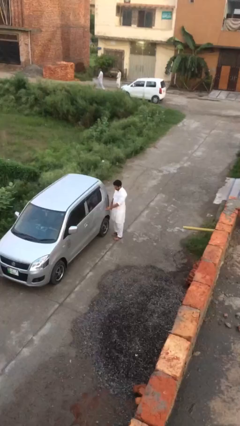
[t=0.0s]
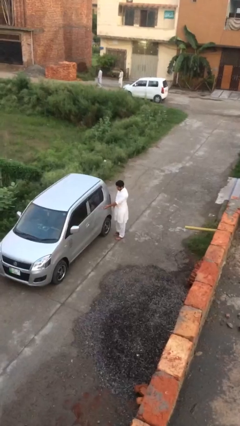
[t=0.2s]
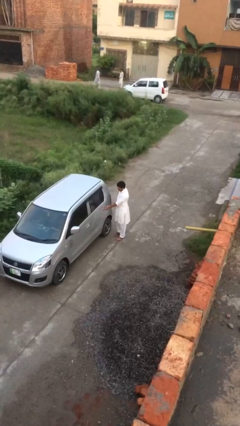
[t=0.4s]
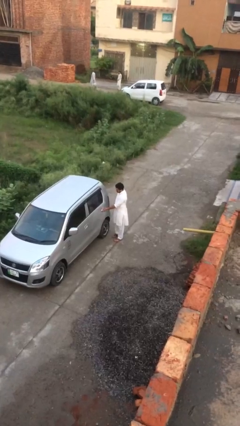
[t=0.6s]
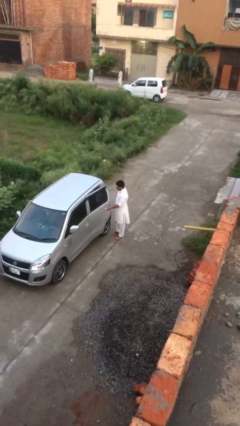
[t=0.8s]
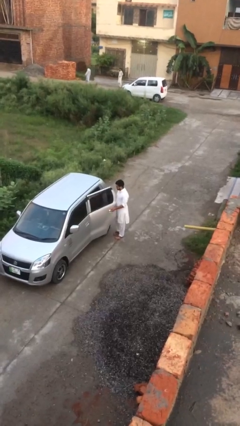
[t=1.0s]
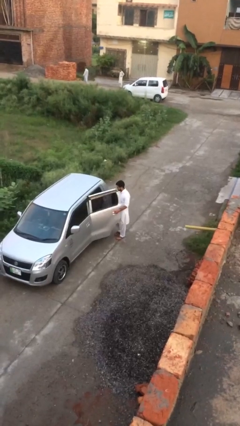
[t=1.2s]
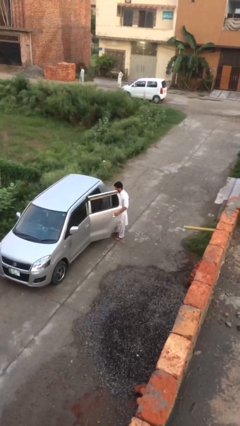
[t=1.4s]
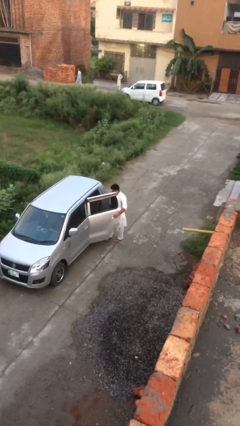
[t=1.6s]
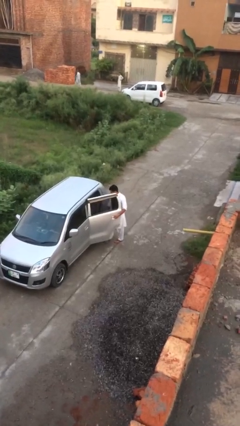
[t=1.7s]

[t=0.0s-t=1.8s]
person opens car door

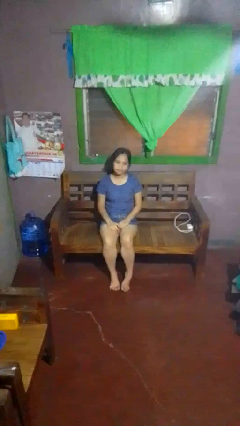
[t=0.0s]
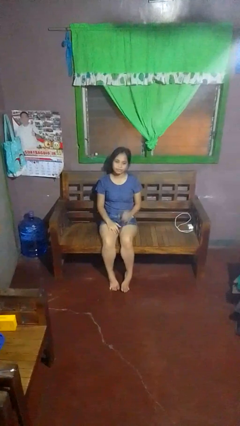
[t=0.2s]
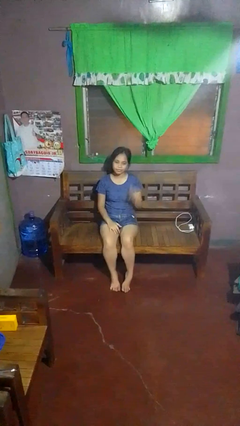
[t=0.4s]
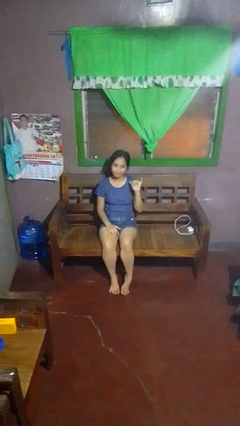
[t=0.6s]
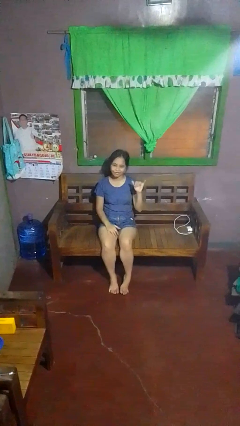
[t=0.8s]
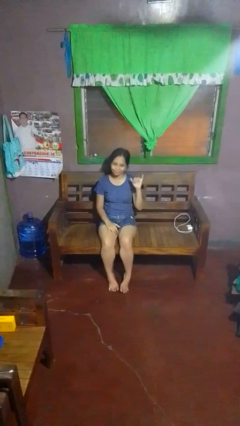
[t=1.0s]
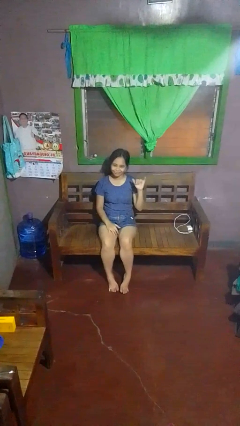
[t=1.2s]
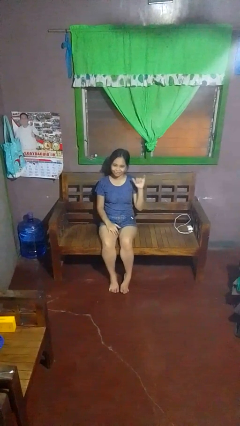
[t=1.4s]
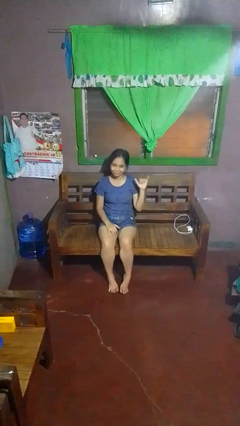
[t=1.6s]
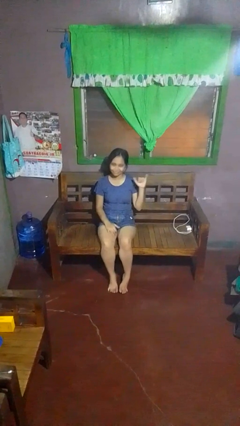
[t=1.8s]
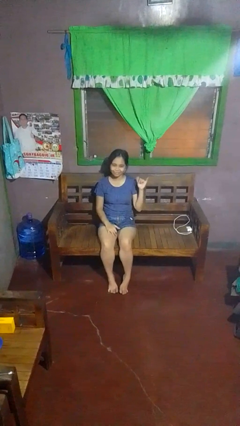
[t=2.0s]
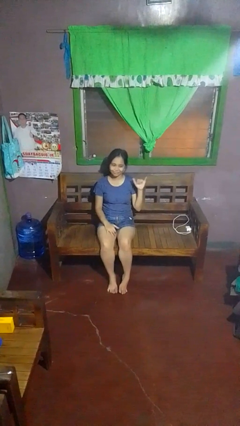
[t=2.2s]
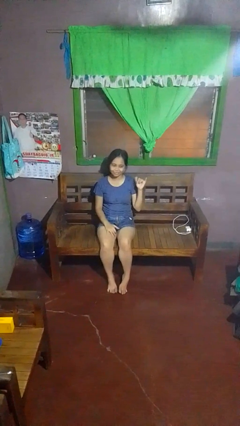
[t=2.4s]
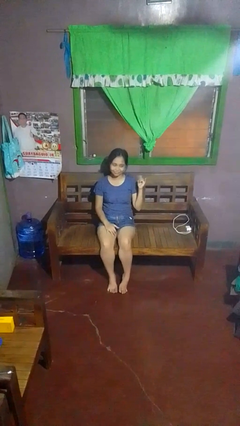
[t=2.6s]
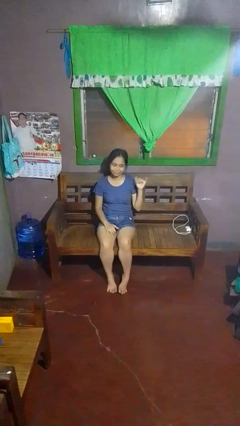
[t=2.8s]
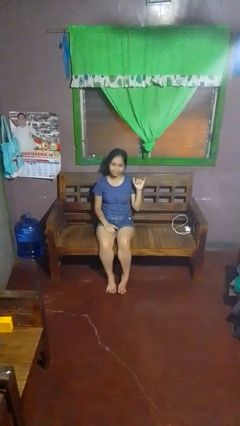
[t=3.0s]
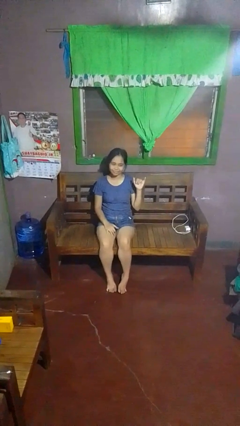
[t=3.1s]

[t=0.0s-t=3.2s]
person gestures hang loose

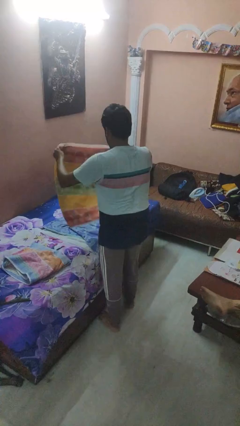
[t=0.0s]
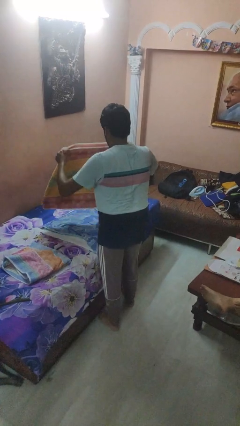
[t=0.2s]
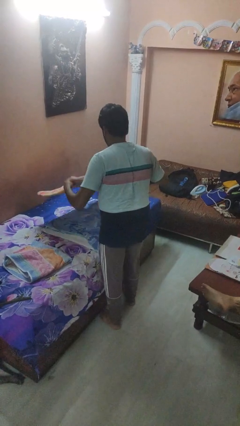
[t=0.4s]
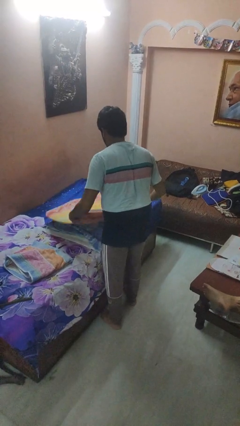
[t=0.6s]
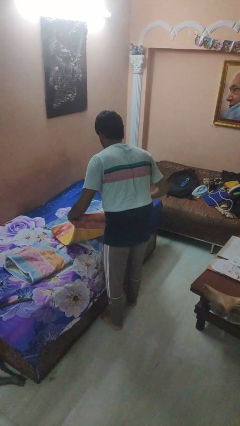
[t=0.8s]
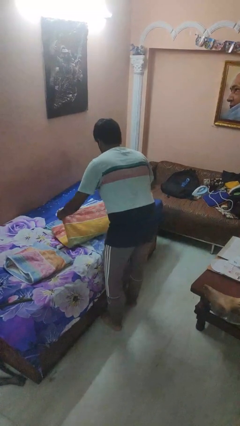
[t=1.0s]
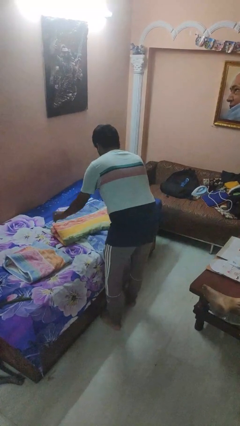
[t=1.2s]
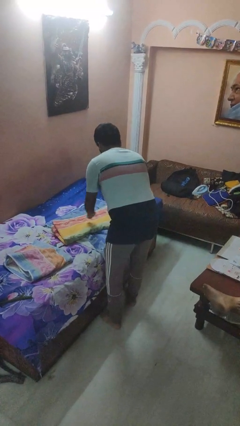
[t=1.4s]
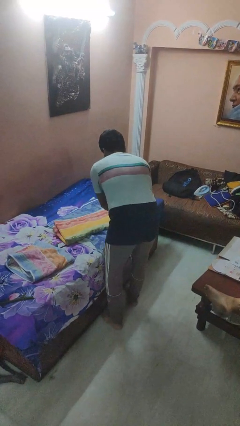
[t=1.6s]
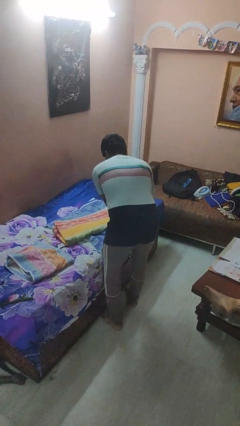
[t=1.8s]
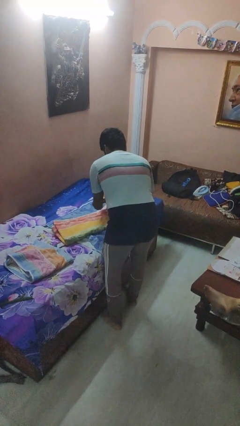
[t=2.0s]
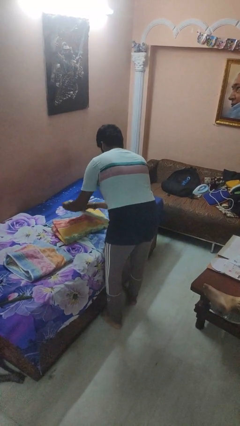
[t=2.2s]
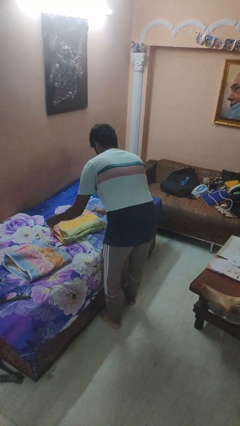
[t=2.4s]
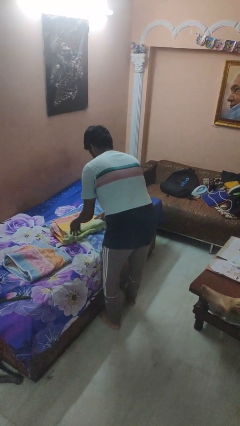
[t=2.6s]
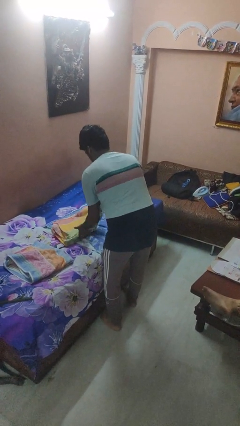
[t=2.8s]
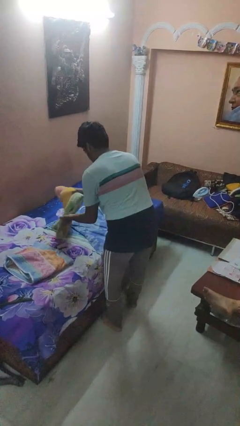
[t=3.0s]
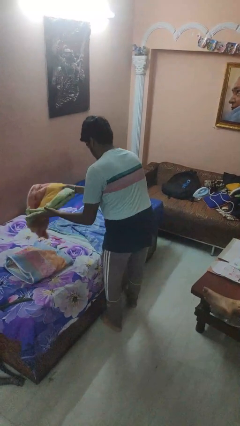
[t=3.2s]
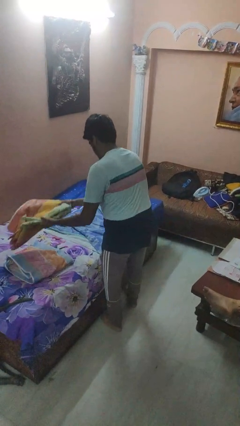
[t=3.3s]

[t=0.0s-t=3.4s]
person folds towel

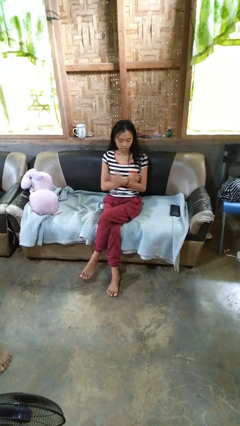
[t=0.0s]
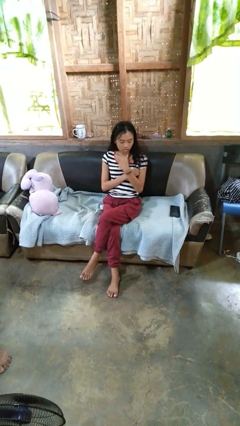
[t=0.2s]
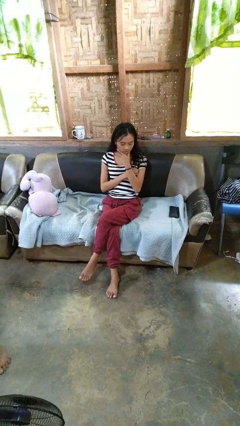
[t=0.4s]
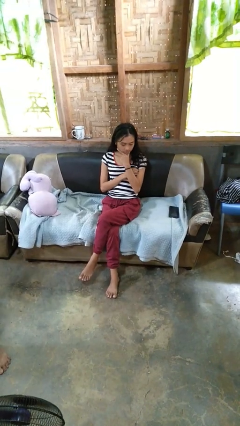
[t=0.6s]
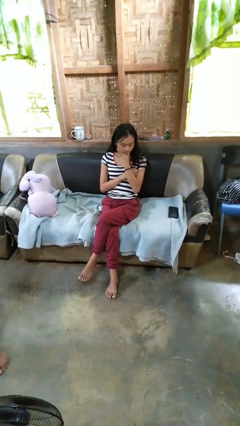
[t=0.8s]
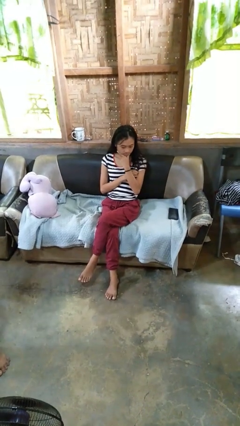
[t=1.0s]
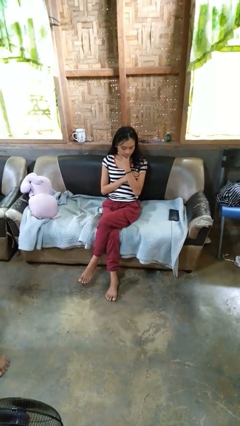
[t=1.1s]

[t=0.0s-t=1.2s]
person strokes chin

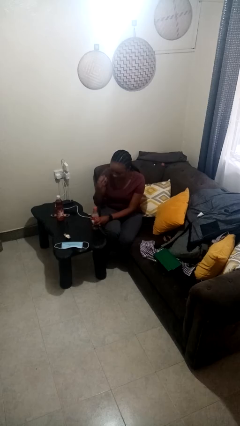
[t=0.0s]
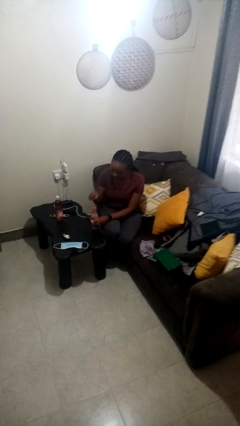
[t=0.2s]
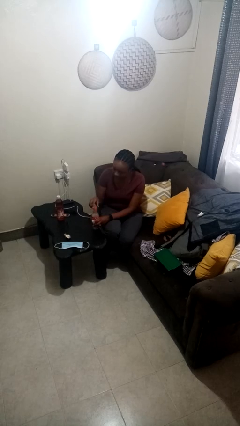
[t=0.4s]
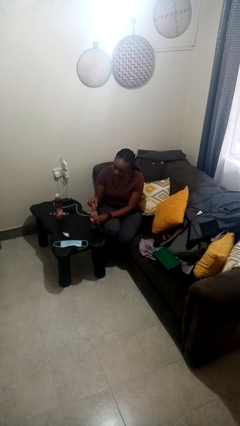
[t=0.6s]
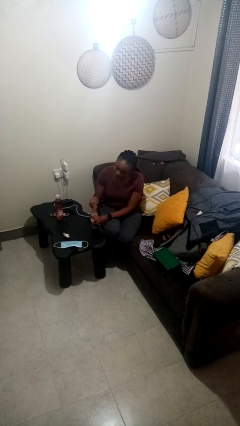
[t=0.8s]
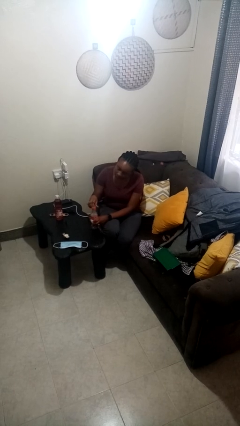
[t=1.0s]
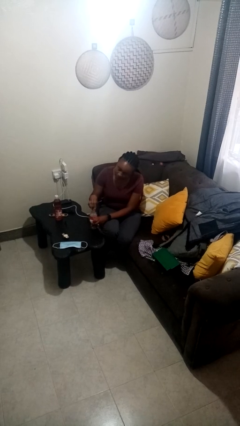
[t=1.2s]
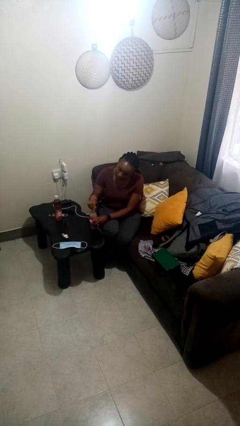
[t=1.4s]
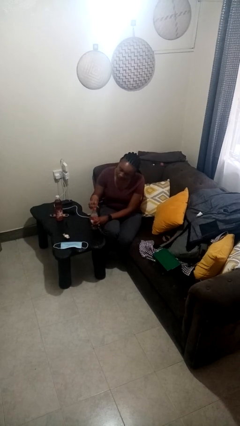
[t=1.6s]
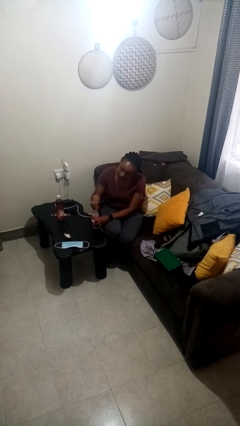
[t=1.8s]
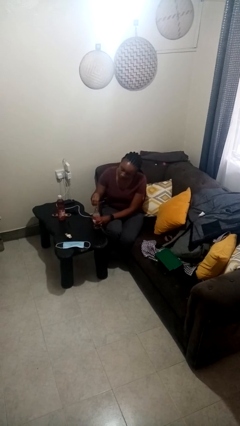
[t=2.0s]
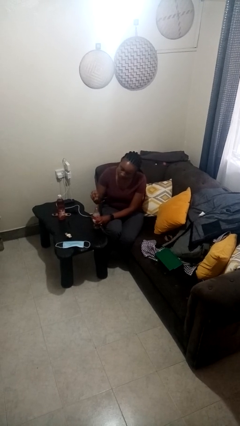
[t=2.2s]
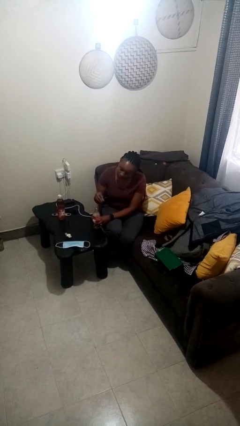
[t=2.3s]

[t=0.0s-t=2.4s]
person unscrews lid from bottle

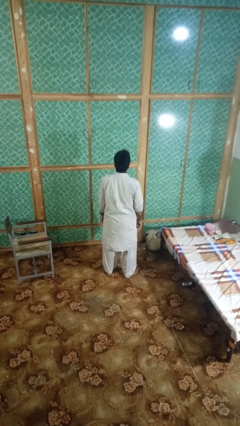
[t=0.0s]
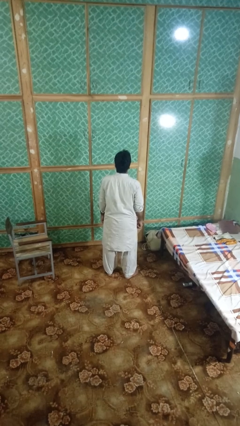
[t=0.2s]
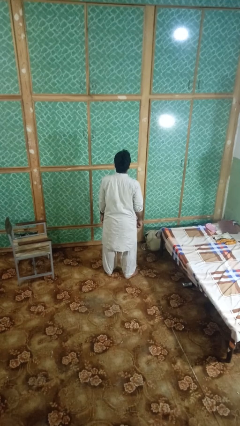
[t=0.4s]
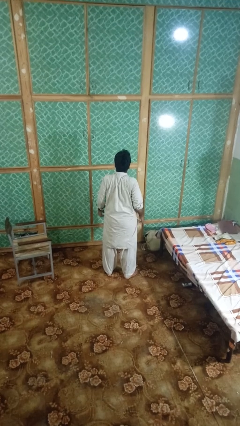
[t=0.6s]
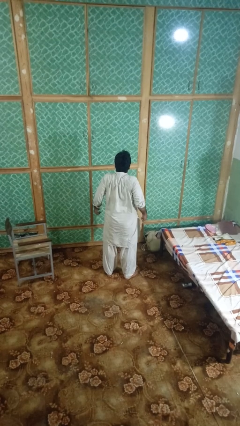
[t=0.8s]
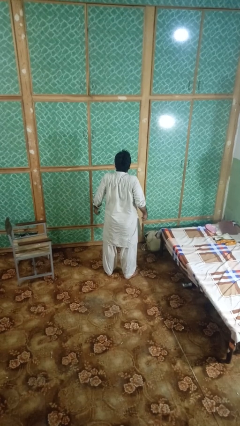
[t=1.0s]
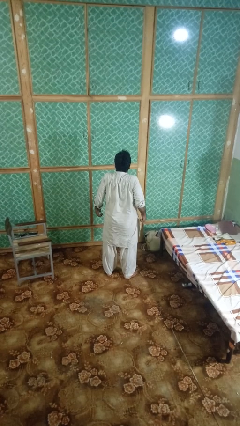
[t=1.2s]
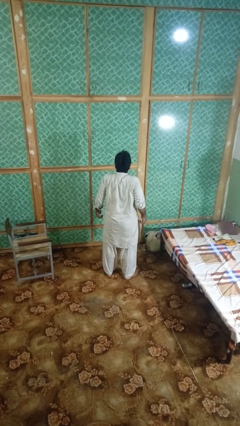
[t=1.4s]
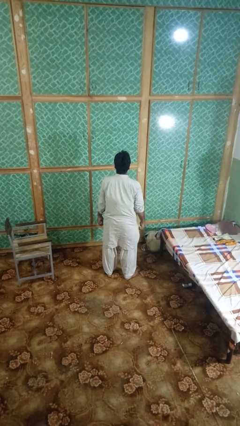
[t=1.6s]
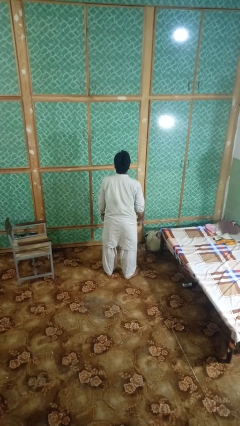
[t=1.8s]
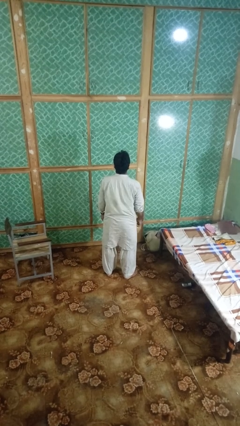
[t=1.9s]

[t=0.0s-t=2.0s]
person shrugs

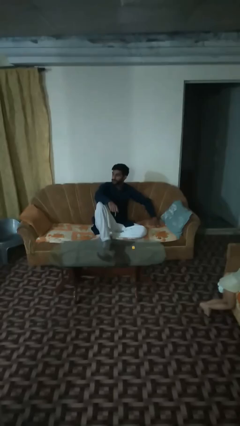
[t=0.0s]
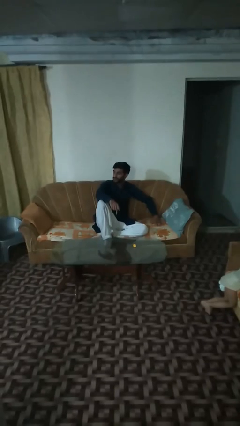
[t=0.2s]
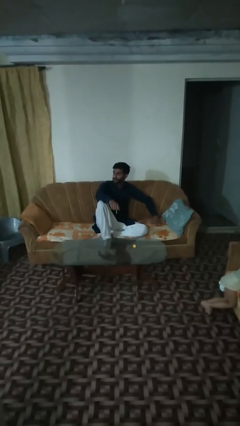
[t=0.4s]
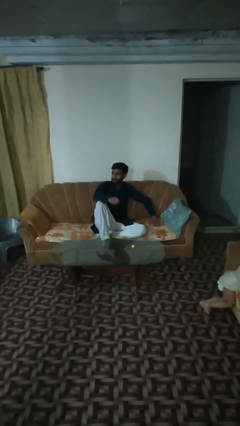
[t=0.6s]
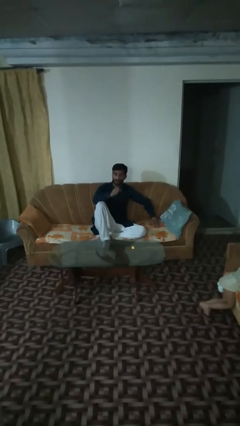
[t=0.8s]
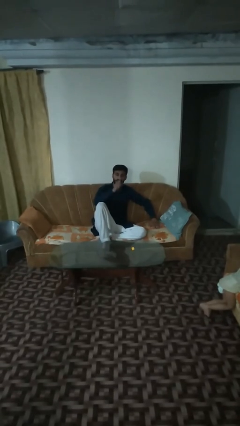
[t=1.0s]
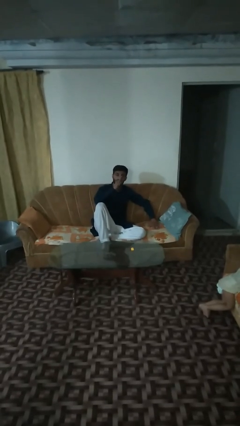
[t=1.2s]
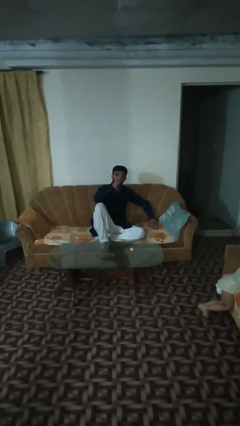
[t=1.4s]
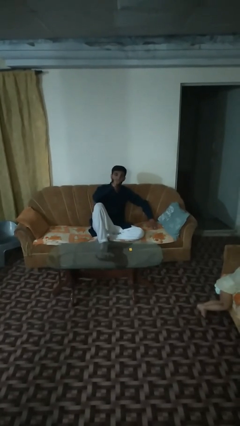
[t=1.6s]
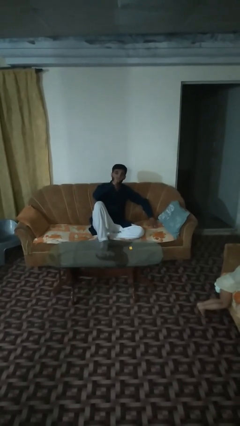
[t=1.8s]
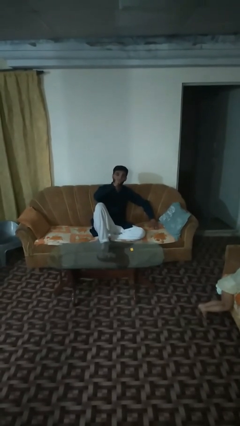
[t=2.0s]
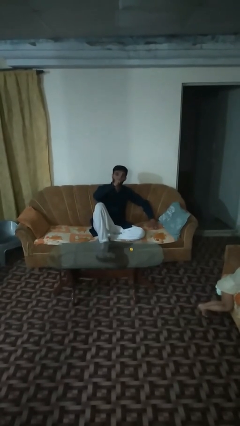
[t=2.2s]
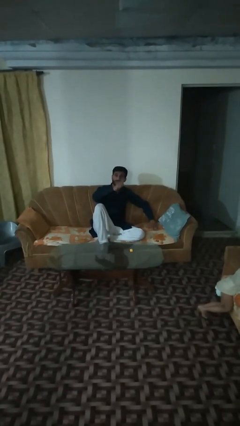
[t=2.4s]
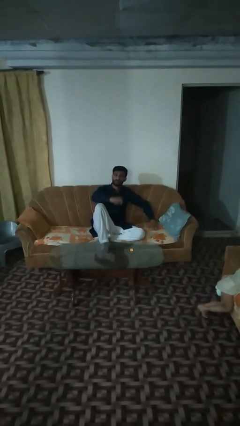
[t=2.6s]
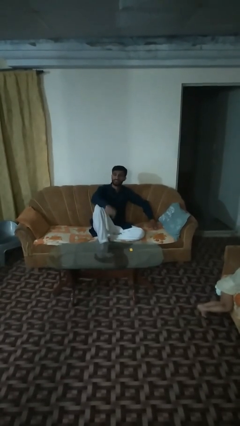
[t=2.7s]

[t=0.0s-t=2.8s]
person vapes
